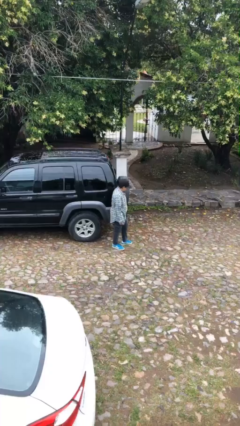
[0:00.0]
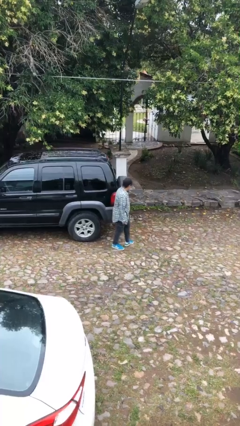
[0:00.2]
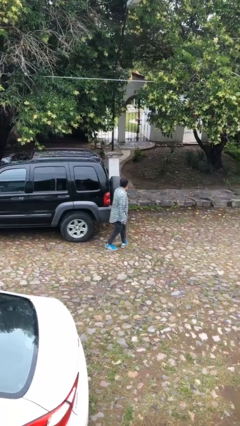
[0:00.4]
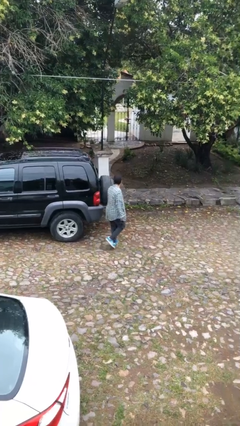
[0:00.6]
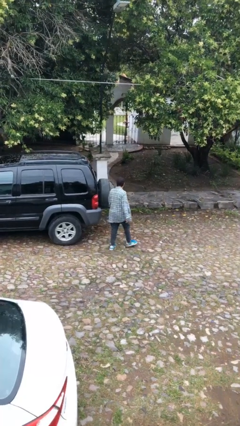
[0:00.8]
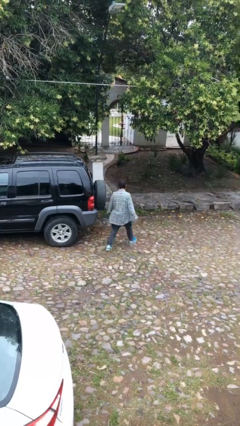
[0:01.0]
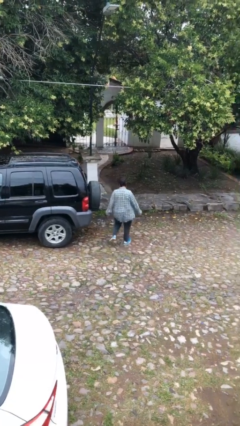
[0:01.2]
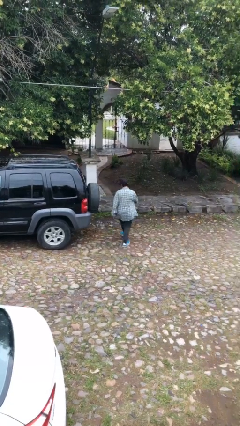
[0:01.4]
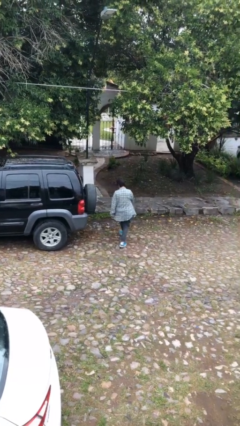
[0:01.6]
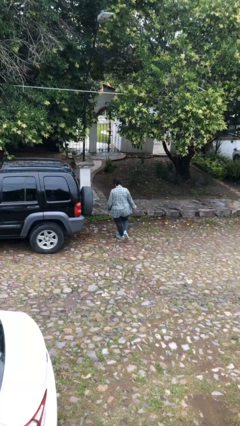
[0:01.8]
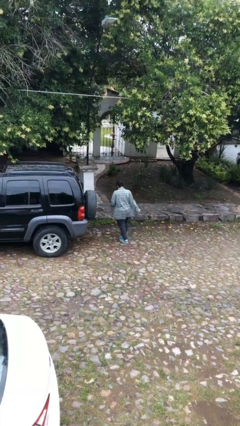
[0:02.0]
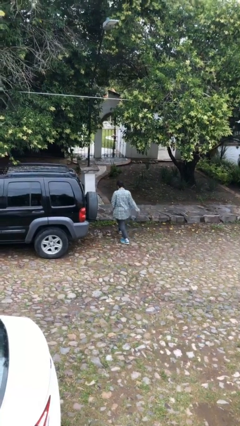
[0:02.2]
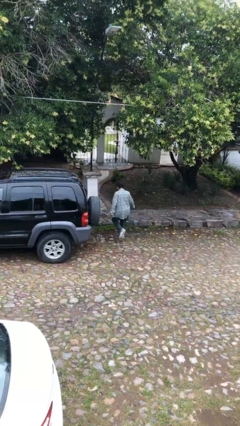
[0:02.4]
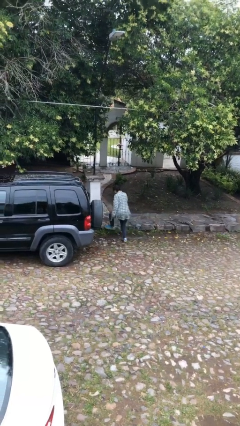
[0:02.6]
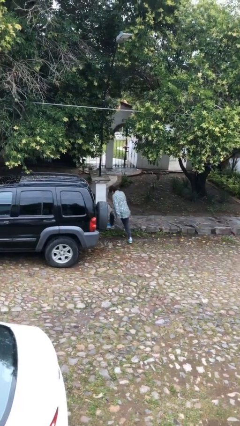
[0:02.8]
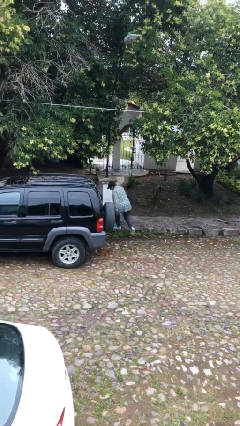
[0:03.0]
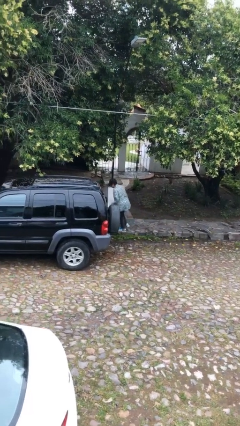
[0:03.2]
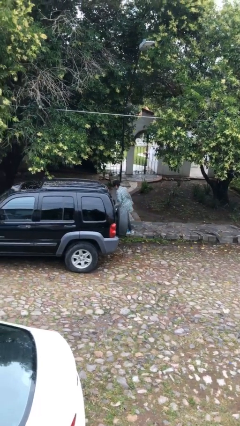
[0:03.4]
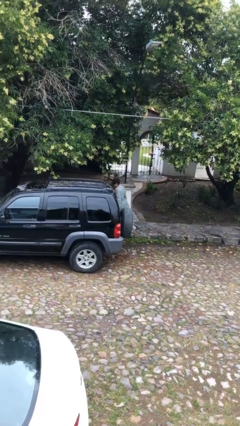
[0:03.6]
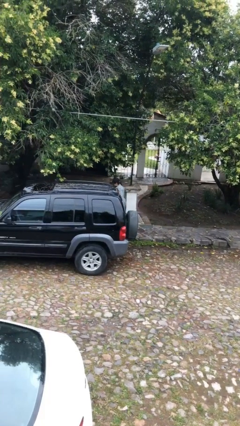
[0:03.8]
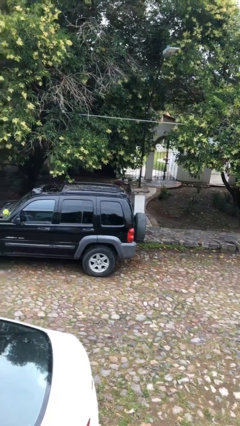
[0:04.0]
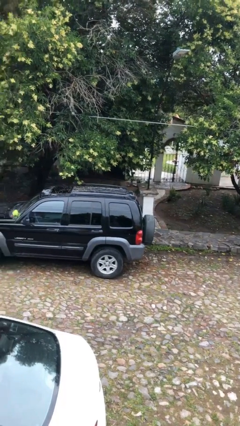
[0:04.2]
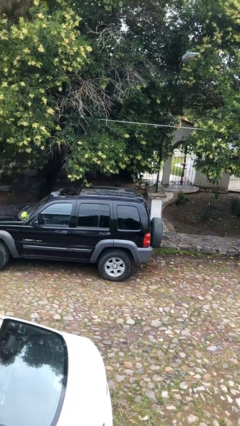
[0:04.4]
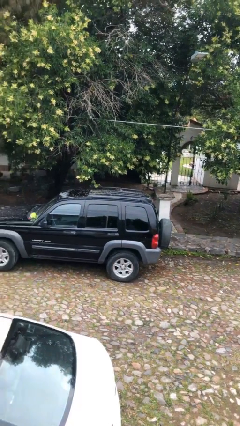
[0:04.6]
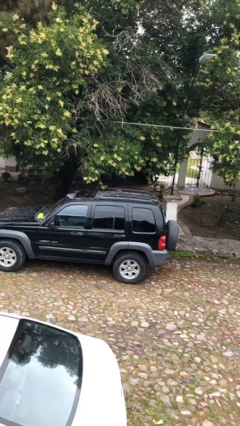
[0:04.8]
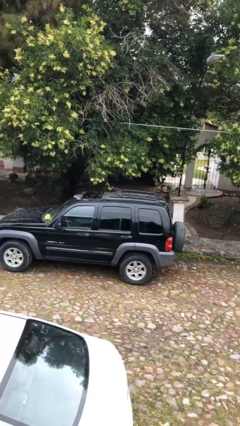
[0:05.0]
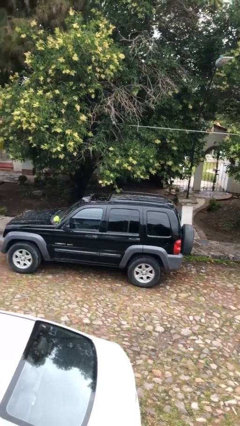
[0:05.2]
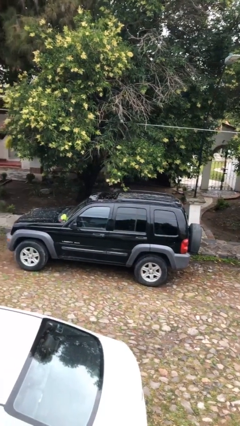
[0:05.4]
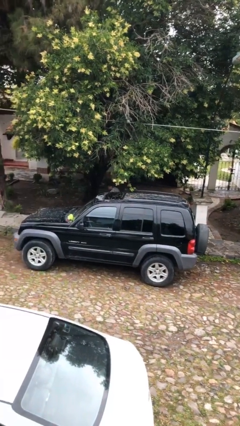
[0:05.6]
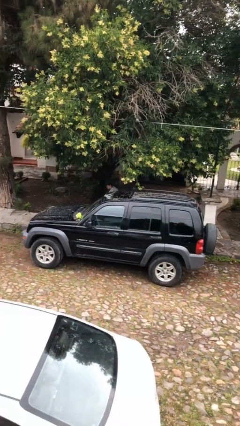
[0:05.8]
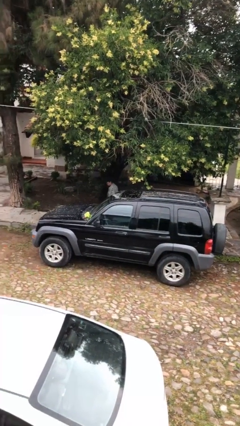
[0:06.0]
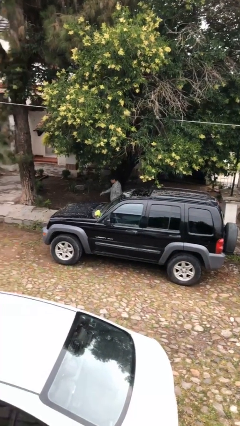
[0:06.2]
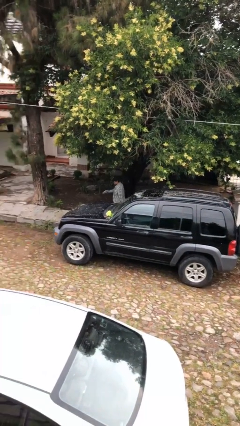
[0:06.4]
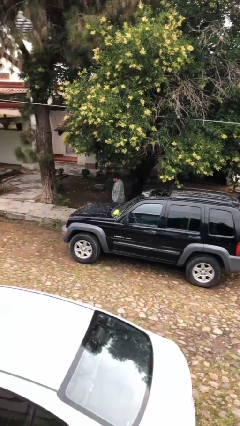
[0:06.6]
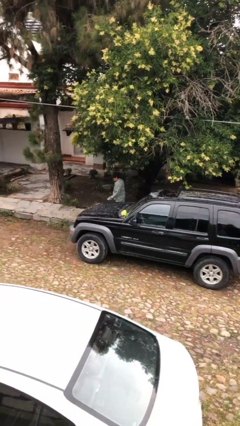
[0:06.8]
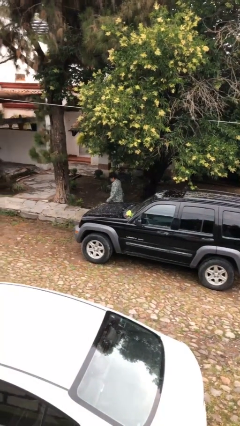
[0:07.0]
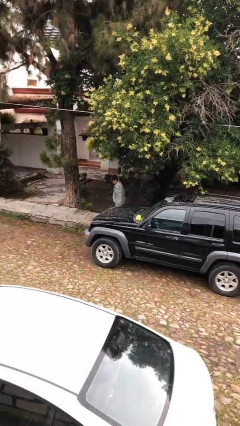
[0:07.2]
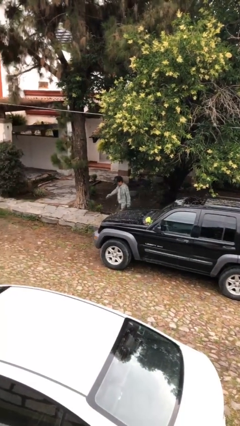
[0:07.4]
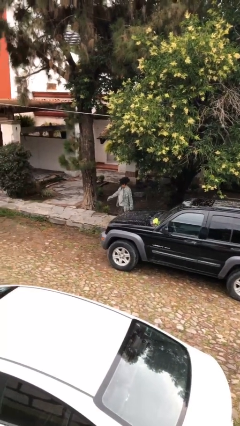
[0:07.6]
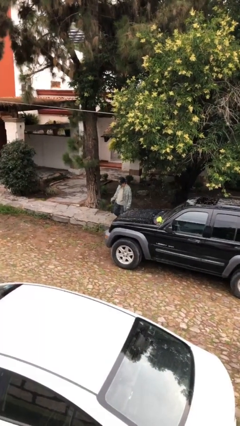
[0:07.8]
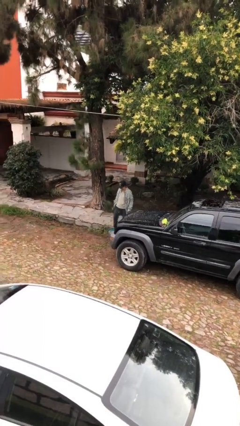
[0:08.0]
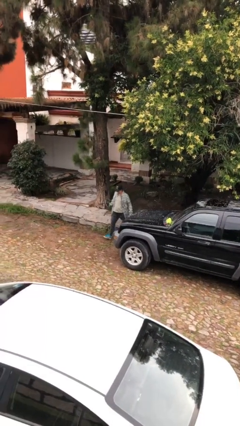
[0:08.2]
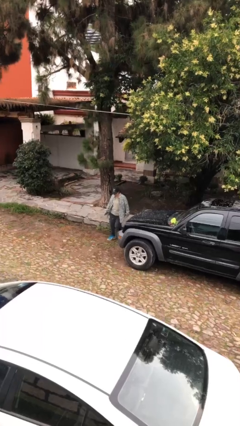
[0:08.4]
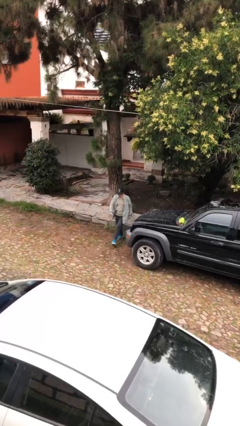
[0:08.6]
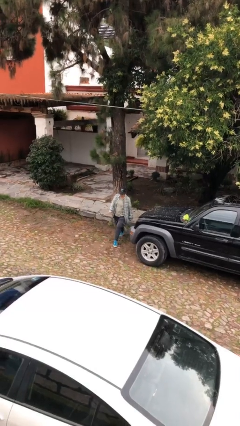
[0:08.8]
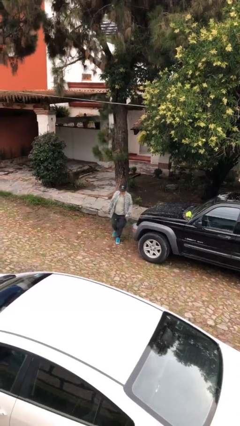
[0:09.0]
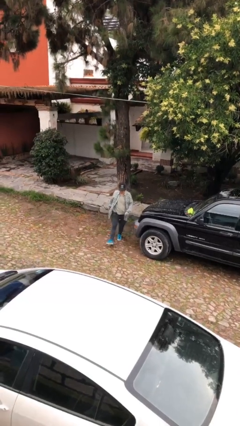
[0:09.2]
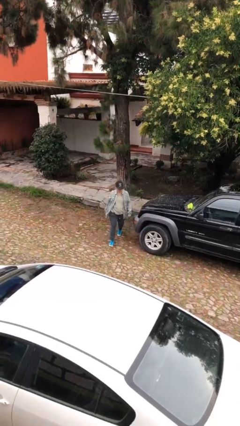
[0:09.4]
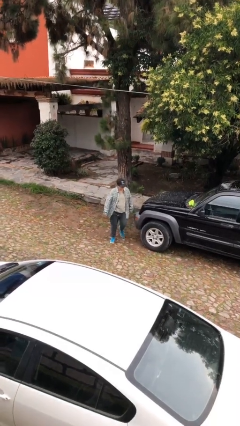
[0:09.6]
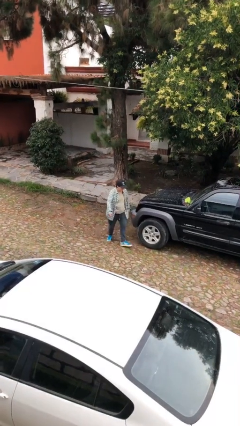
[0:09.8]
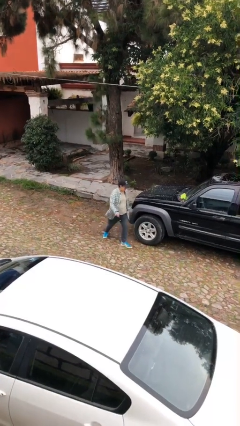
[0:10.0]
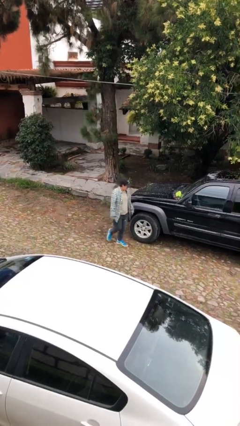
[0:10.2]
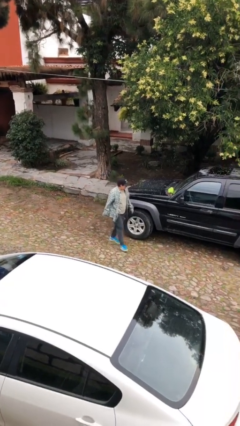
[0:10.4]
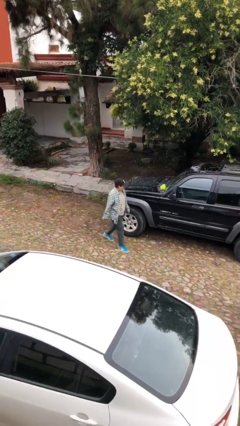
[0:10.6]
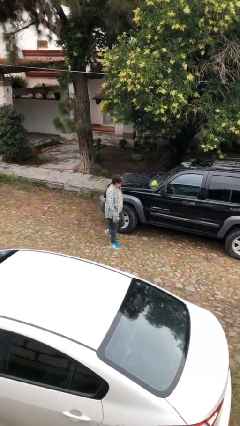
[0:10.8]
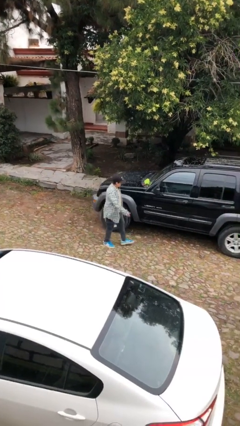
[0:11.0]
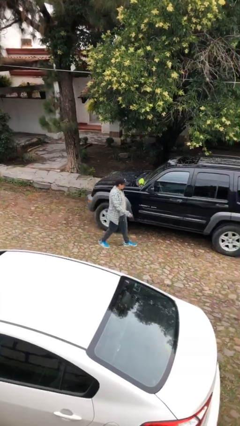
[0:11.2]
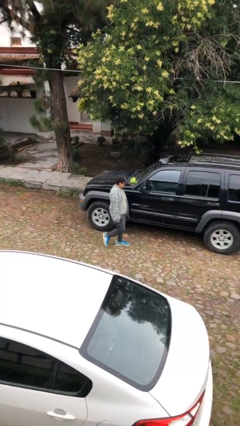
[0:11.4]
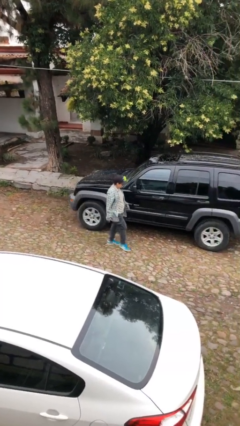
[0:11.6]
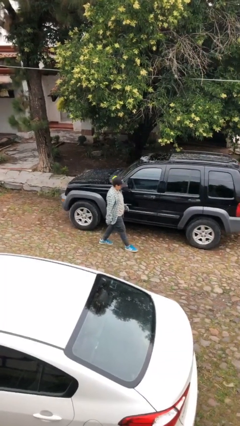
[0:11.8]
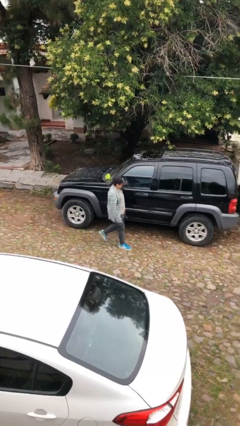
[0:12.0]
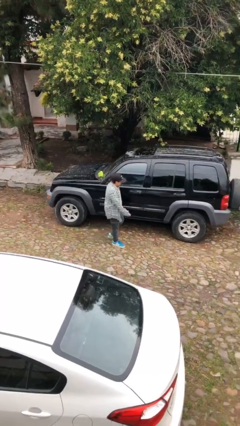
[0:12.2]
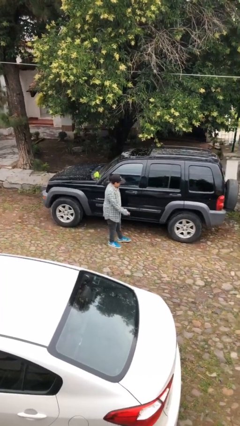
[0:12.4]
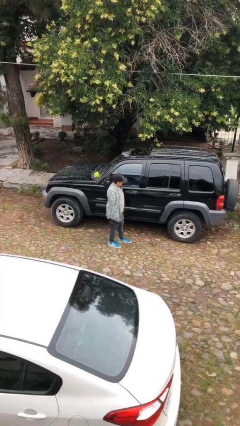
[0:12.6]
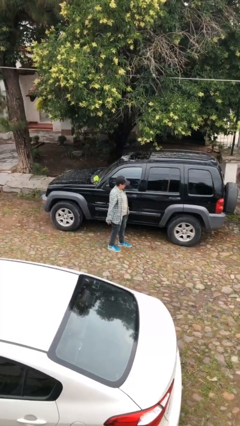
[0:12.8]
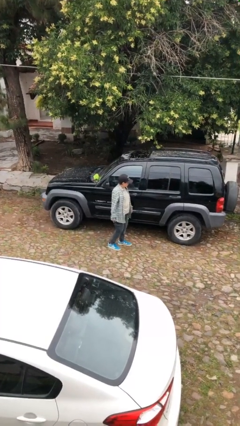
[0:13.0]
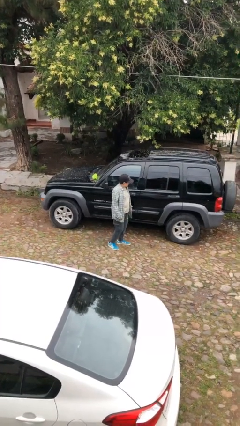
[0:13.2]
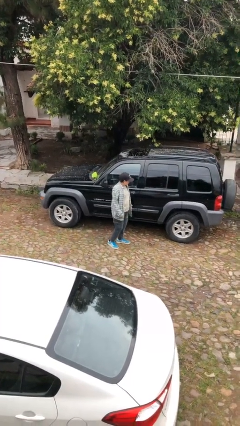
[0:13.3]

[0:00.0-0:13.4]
person walks around car

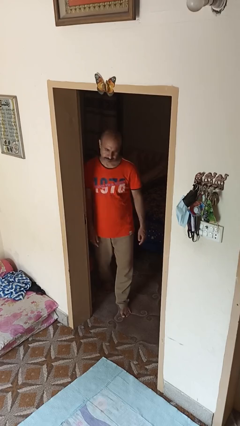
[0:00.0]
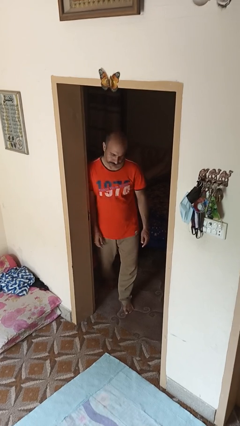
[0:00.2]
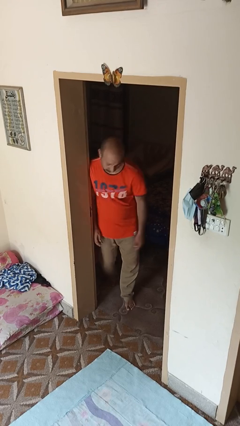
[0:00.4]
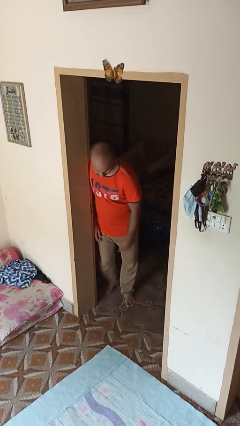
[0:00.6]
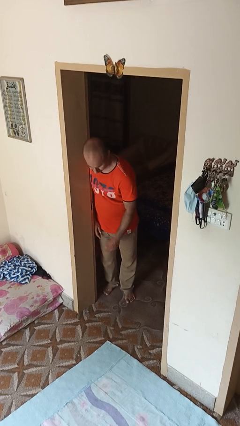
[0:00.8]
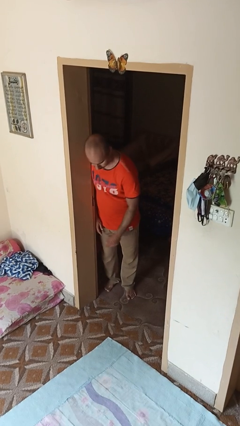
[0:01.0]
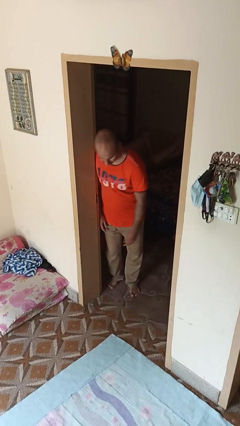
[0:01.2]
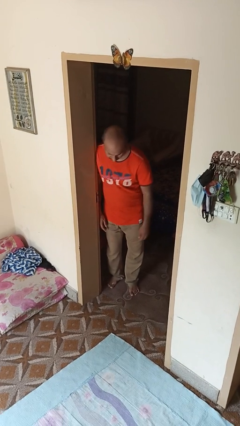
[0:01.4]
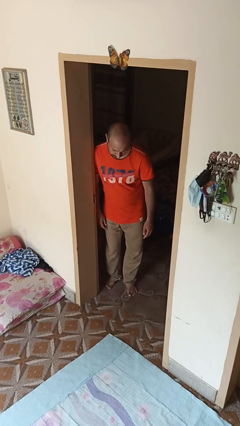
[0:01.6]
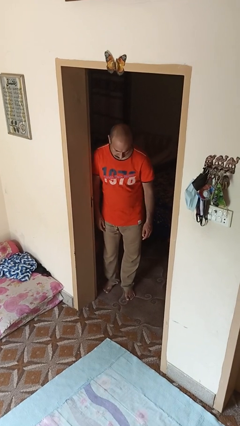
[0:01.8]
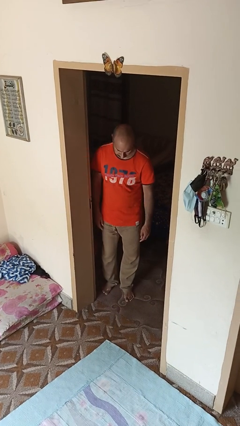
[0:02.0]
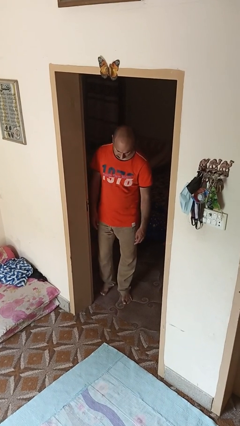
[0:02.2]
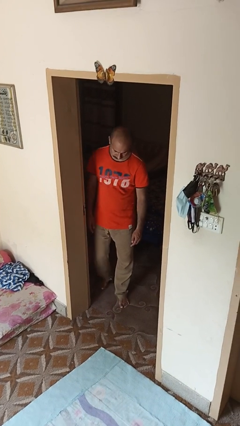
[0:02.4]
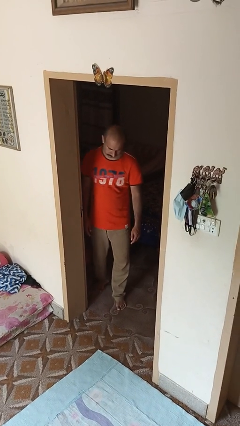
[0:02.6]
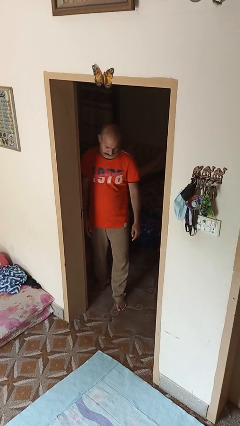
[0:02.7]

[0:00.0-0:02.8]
person bumps into wall

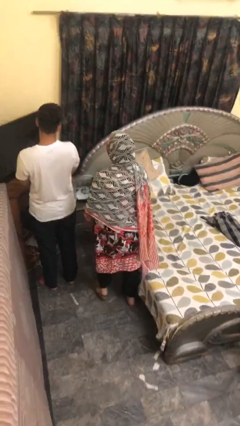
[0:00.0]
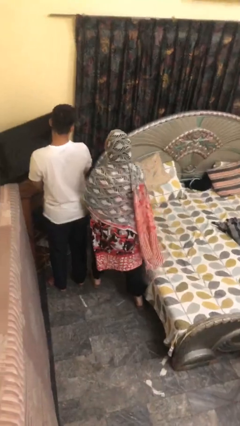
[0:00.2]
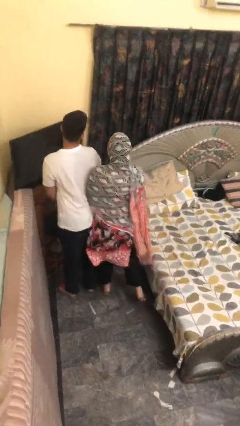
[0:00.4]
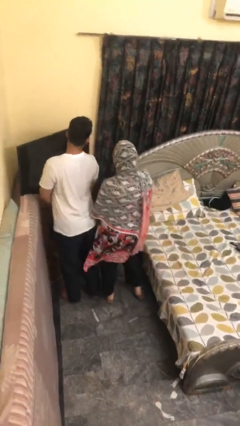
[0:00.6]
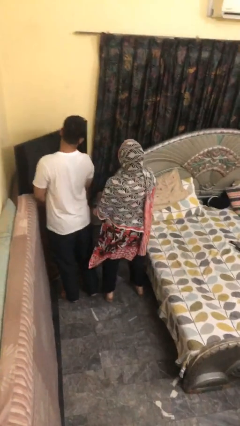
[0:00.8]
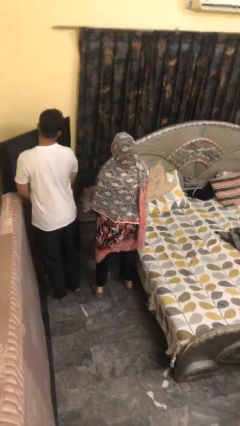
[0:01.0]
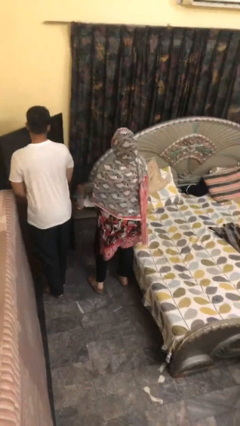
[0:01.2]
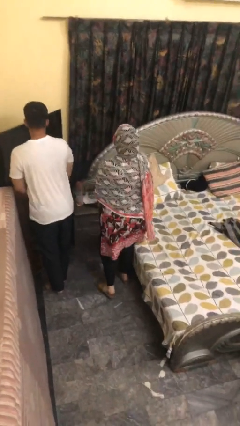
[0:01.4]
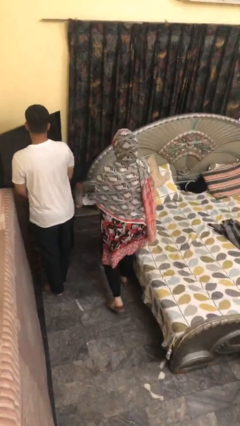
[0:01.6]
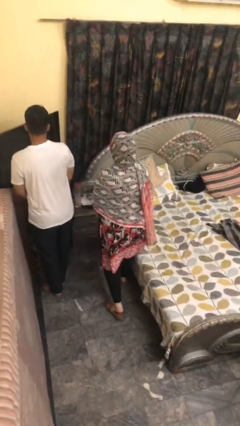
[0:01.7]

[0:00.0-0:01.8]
person bumps into person
